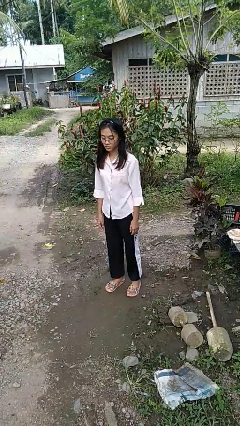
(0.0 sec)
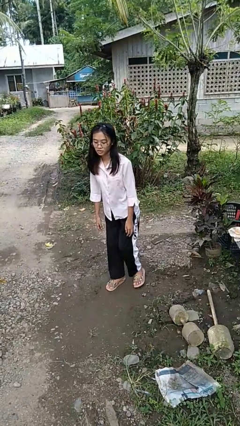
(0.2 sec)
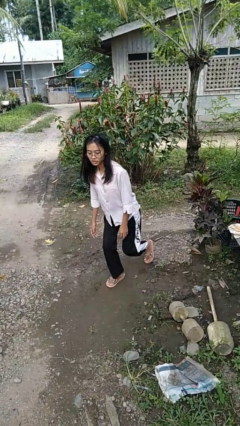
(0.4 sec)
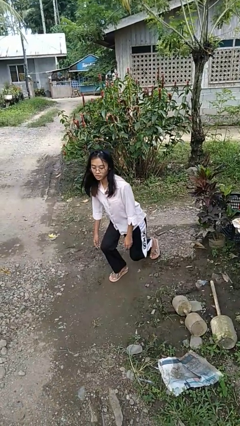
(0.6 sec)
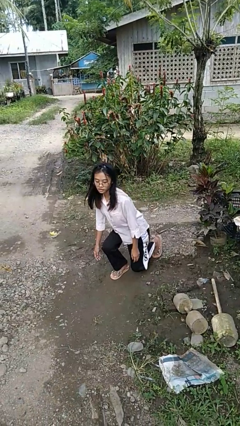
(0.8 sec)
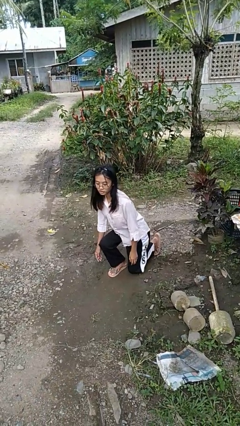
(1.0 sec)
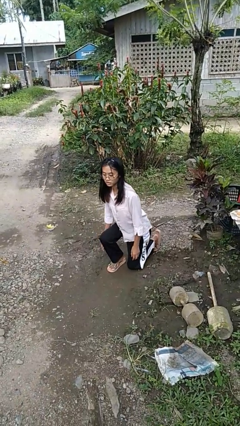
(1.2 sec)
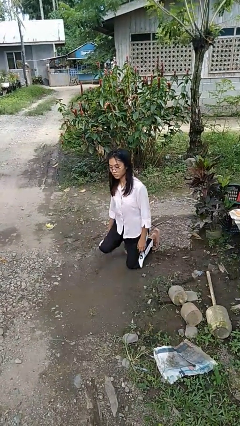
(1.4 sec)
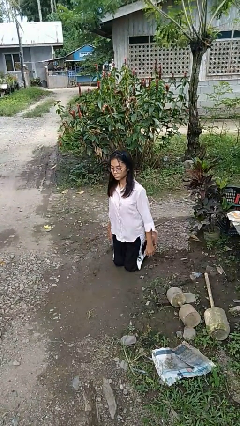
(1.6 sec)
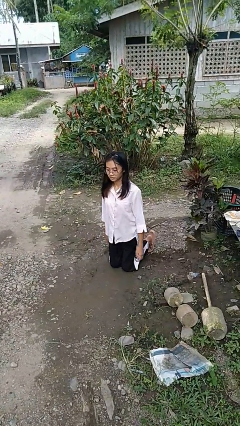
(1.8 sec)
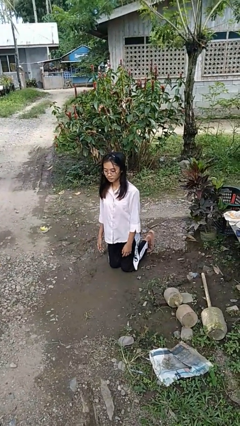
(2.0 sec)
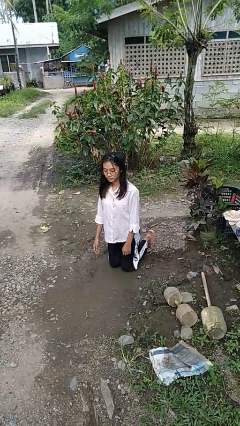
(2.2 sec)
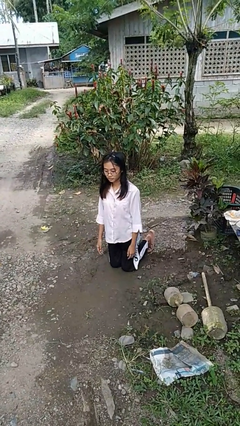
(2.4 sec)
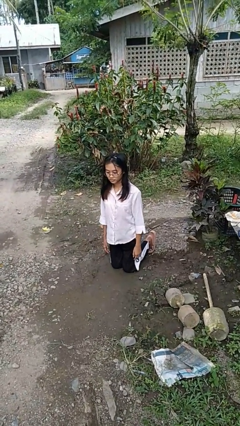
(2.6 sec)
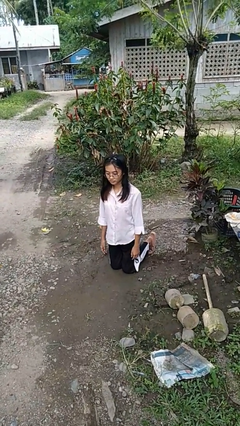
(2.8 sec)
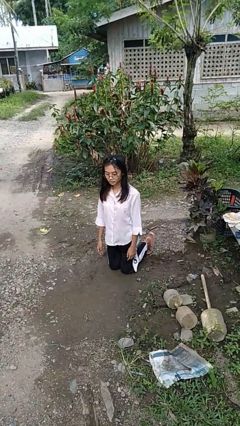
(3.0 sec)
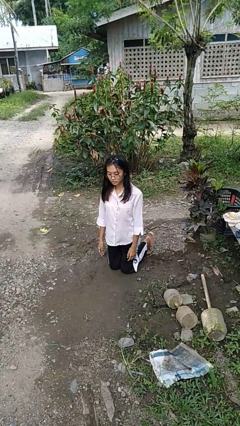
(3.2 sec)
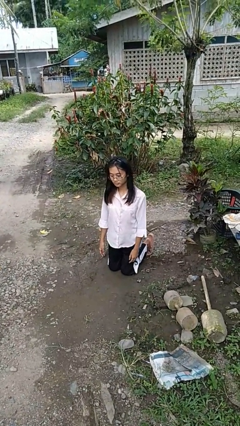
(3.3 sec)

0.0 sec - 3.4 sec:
person kneels

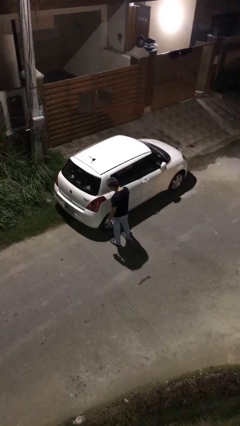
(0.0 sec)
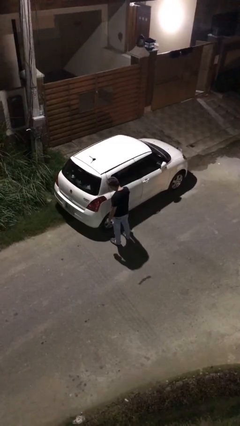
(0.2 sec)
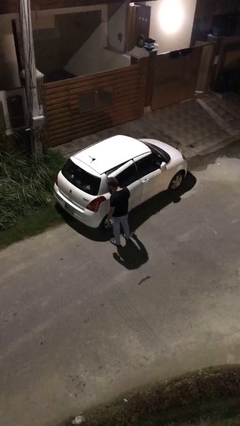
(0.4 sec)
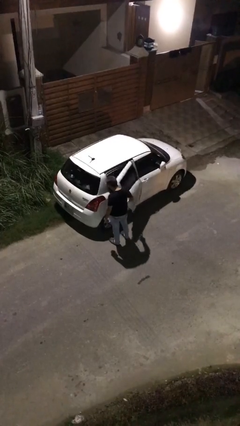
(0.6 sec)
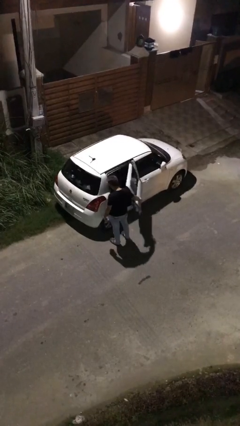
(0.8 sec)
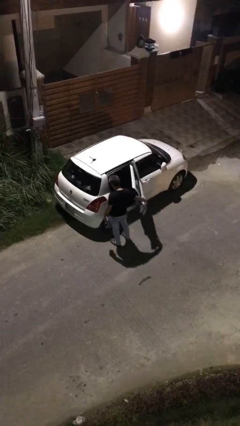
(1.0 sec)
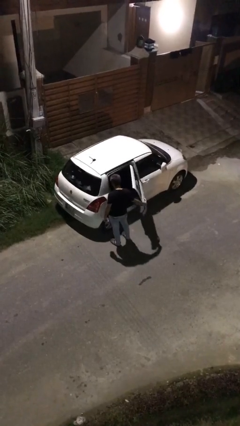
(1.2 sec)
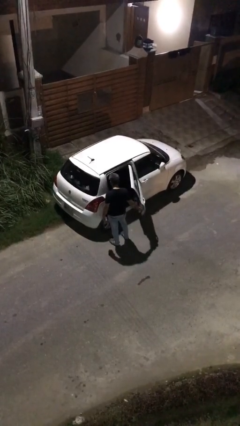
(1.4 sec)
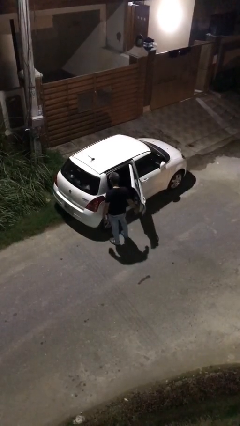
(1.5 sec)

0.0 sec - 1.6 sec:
person opens car door

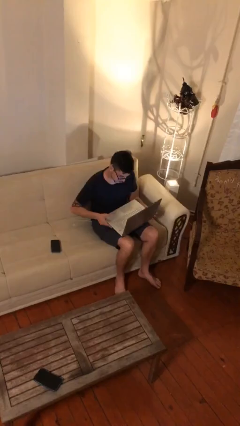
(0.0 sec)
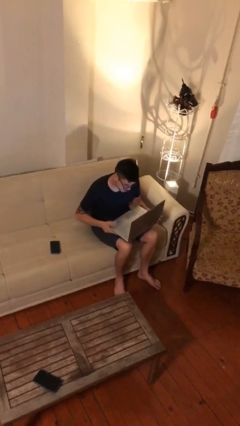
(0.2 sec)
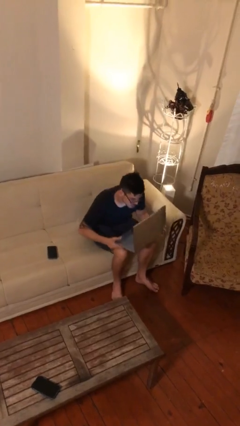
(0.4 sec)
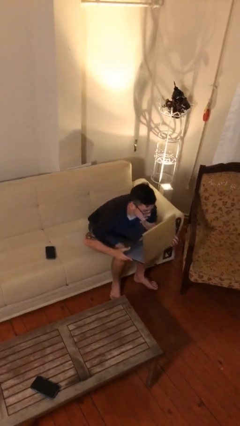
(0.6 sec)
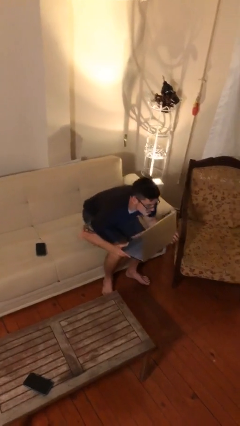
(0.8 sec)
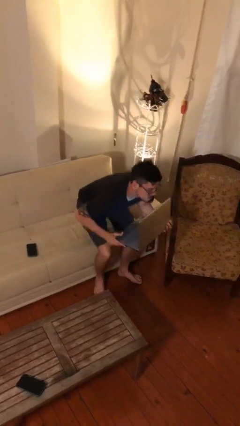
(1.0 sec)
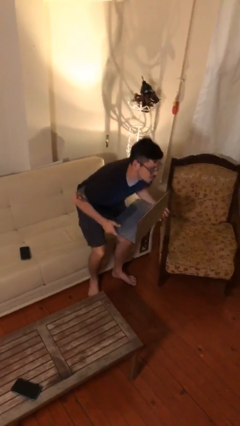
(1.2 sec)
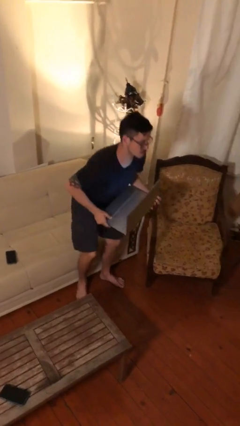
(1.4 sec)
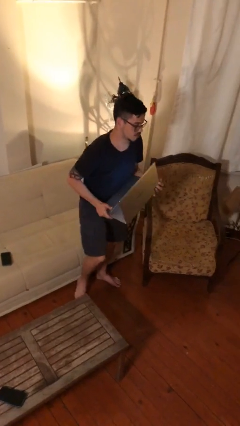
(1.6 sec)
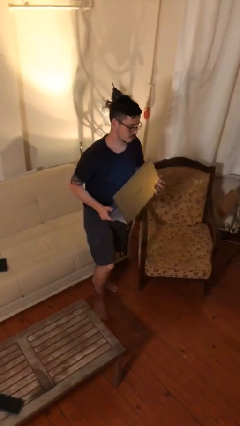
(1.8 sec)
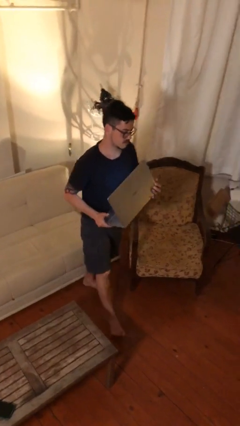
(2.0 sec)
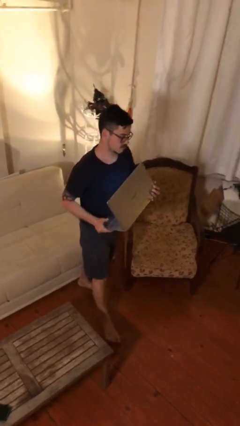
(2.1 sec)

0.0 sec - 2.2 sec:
person stands up

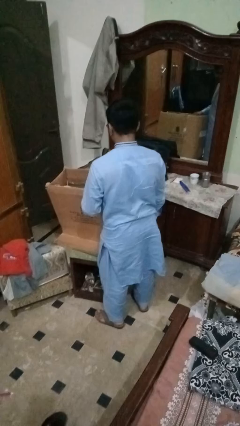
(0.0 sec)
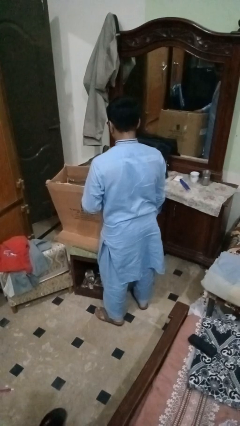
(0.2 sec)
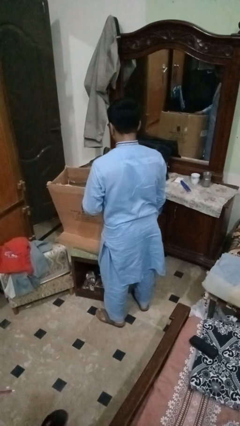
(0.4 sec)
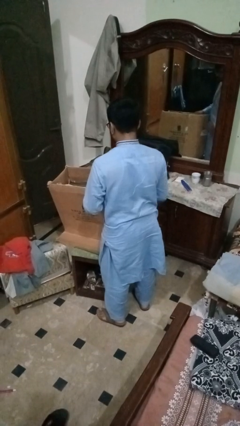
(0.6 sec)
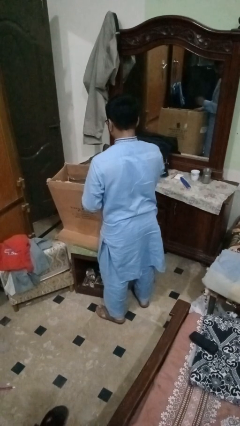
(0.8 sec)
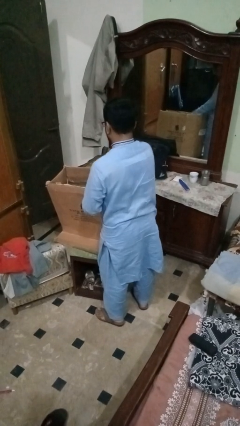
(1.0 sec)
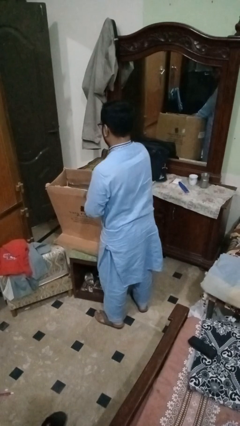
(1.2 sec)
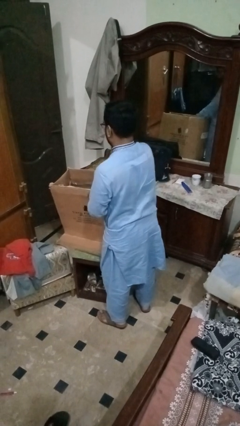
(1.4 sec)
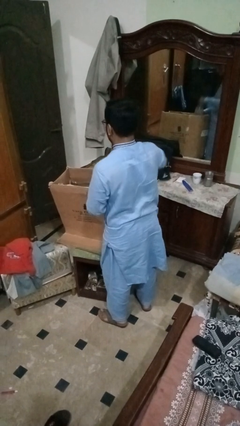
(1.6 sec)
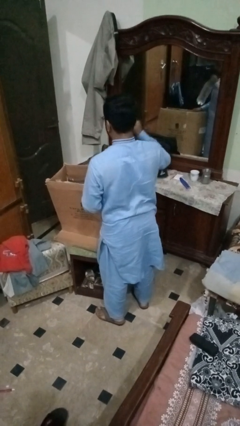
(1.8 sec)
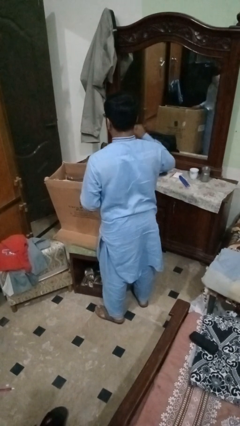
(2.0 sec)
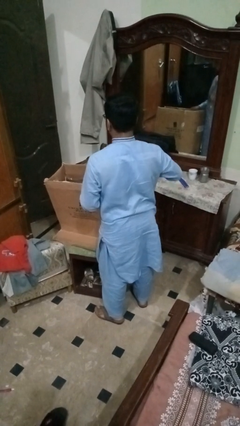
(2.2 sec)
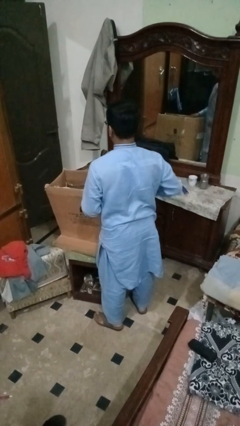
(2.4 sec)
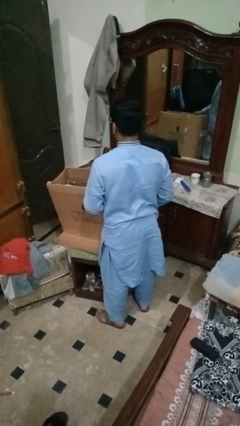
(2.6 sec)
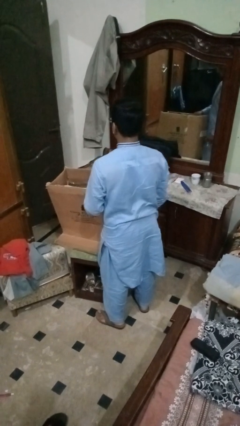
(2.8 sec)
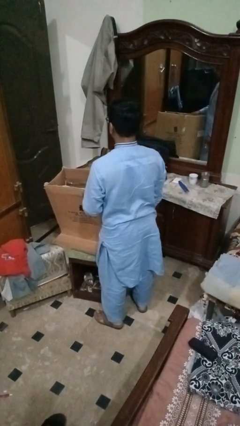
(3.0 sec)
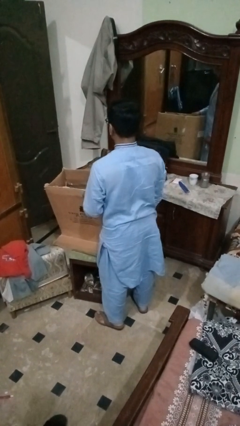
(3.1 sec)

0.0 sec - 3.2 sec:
person takes object from box

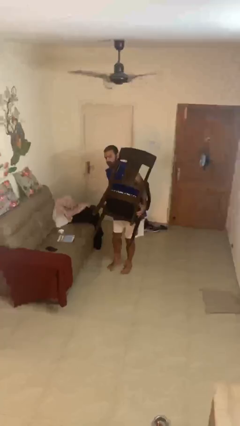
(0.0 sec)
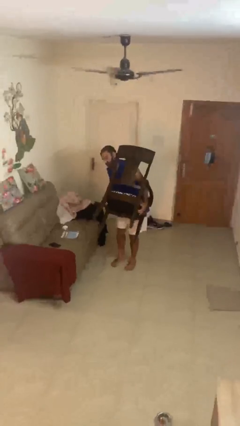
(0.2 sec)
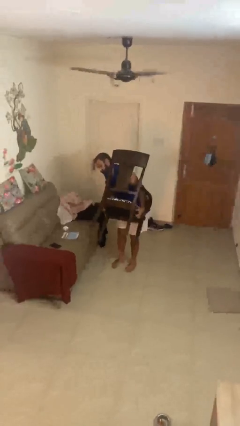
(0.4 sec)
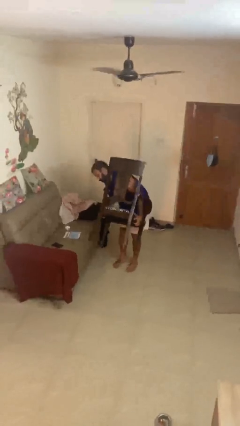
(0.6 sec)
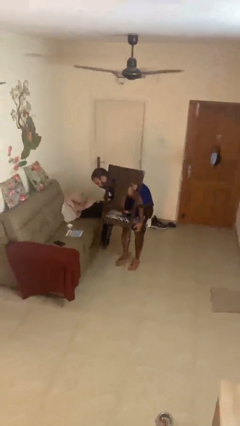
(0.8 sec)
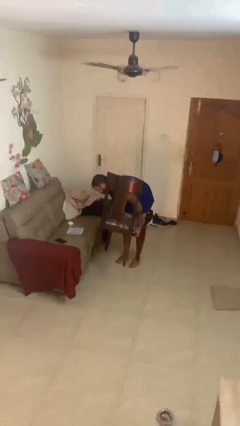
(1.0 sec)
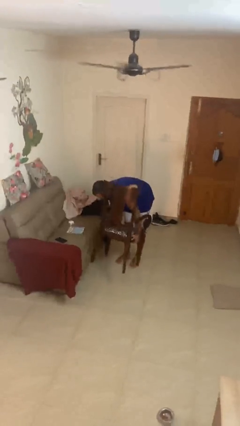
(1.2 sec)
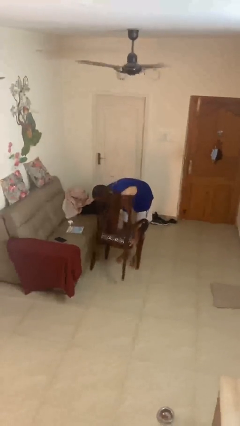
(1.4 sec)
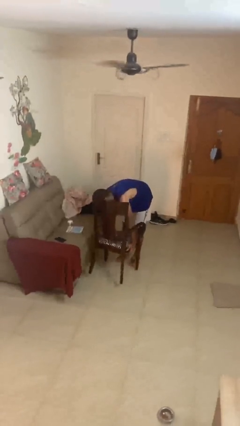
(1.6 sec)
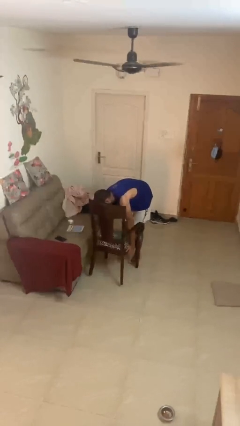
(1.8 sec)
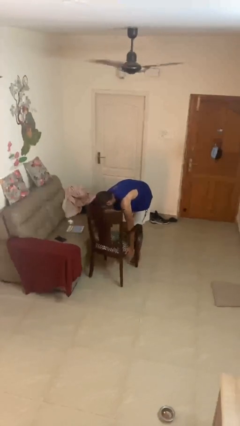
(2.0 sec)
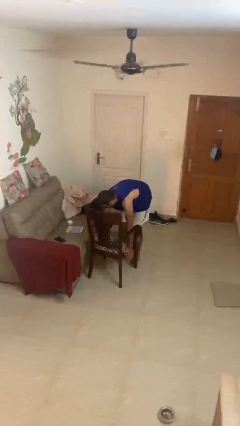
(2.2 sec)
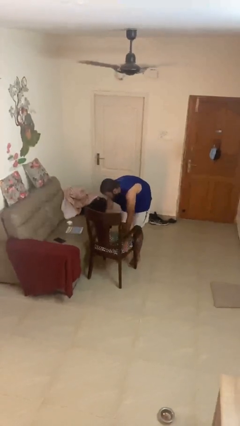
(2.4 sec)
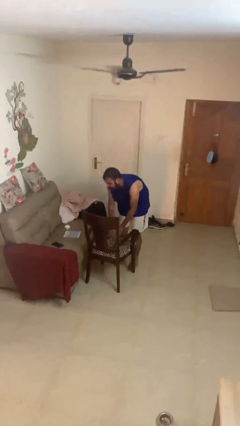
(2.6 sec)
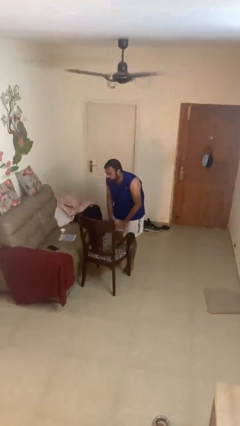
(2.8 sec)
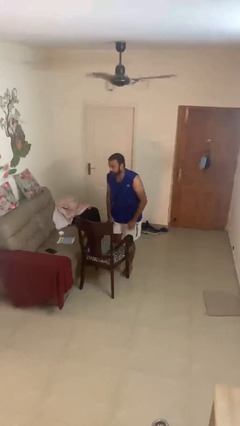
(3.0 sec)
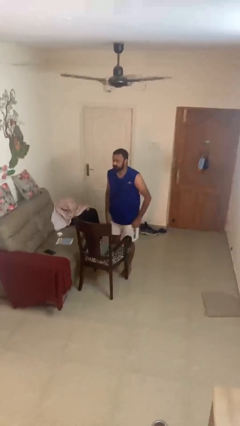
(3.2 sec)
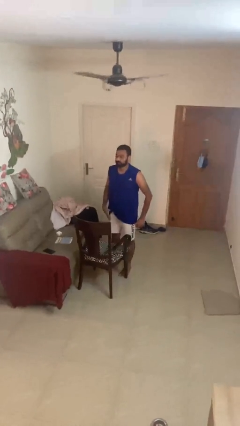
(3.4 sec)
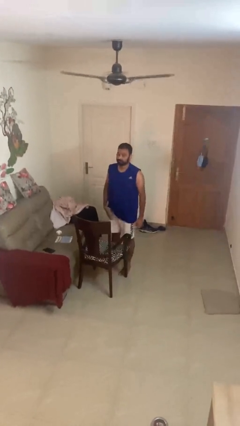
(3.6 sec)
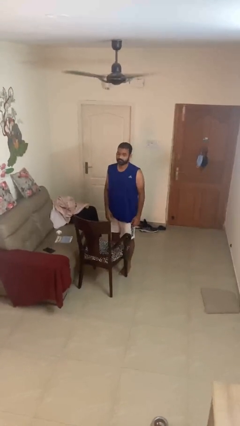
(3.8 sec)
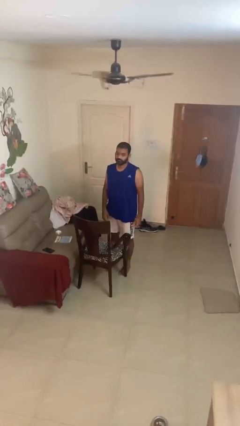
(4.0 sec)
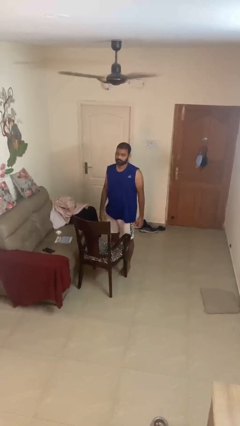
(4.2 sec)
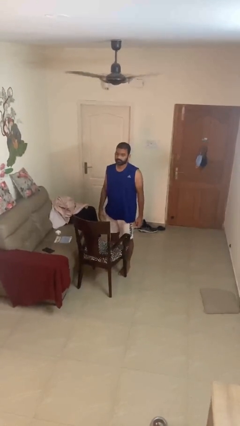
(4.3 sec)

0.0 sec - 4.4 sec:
person puts down object on floor

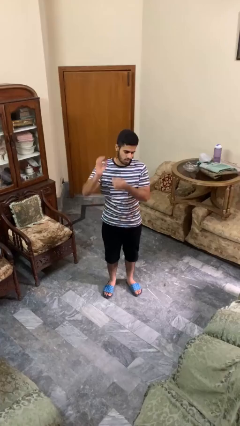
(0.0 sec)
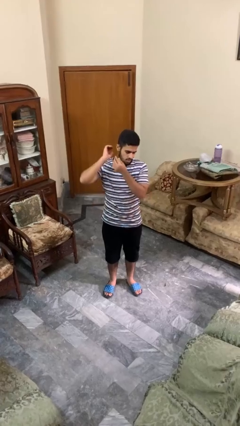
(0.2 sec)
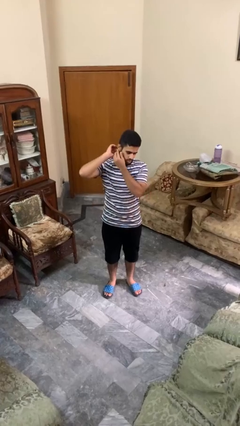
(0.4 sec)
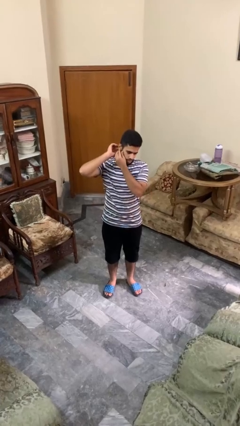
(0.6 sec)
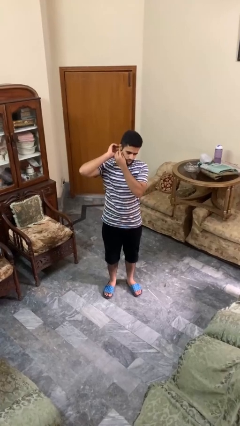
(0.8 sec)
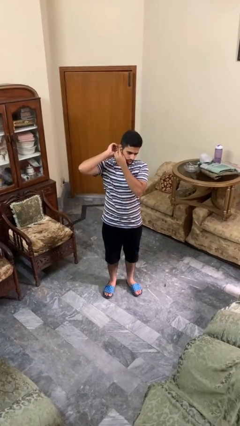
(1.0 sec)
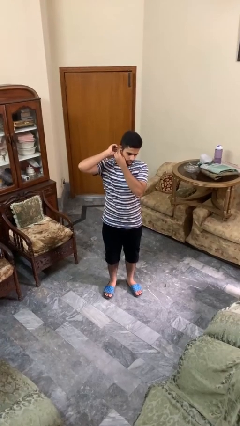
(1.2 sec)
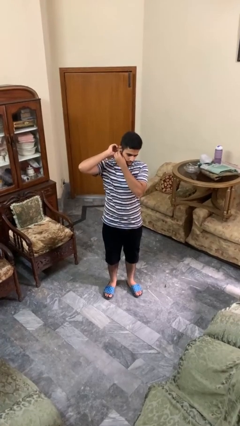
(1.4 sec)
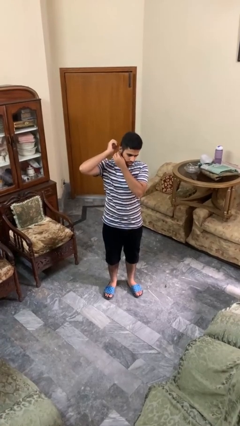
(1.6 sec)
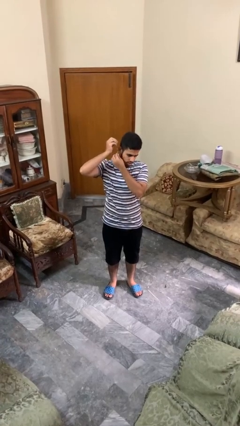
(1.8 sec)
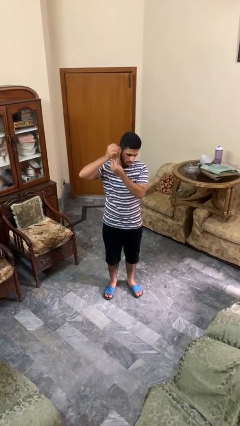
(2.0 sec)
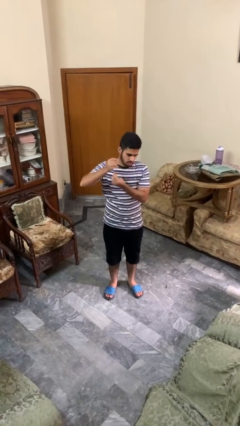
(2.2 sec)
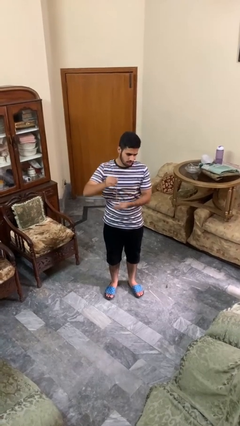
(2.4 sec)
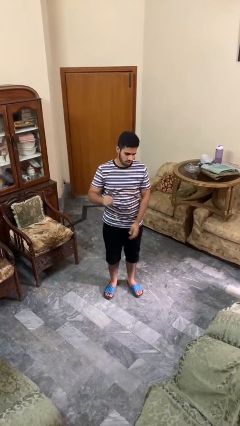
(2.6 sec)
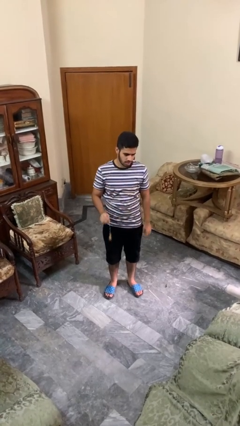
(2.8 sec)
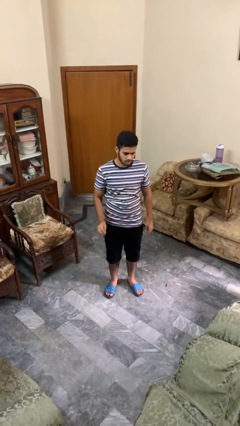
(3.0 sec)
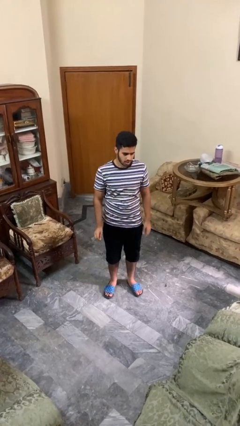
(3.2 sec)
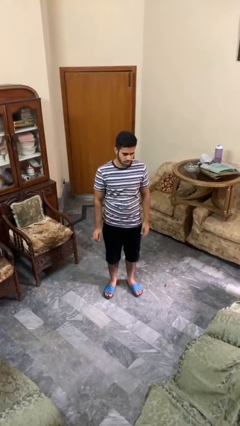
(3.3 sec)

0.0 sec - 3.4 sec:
person takes off earrings
